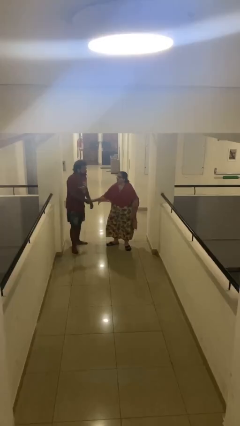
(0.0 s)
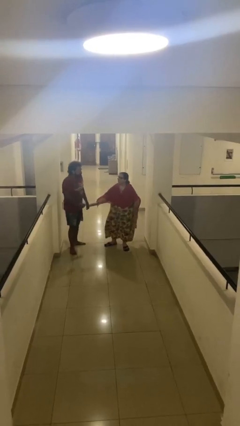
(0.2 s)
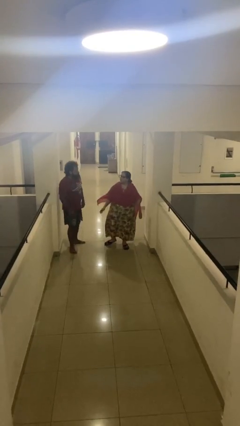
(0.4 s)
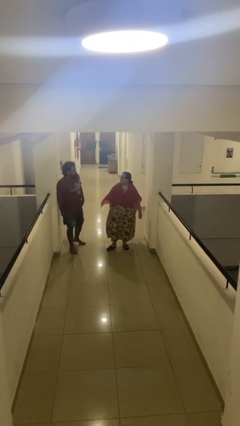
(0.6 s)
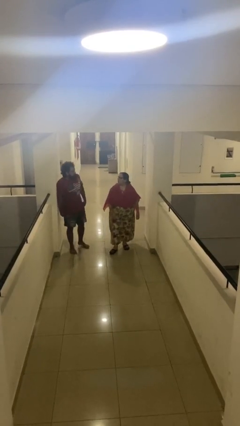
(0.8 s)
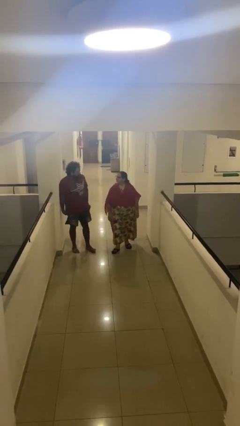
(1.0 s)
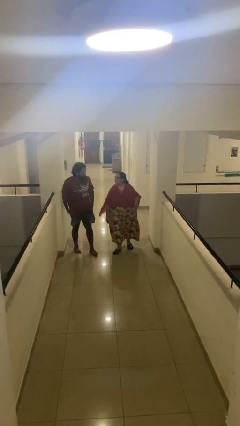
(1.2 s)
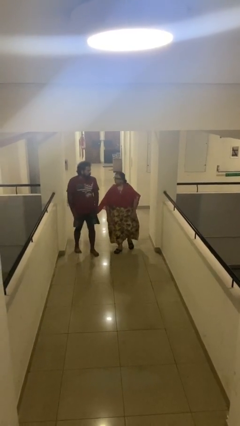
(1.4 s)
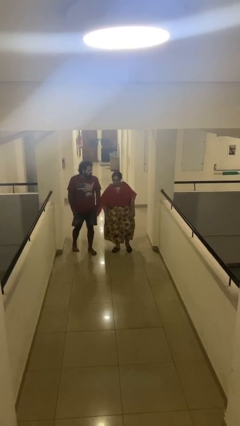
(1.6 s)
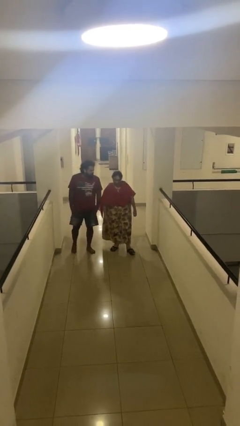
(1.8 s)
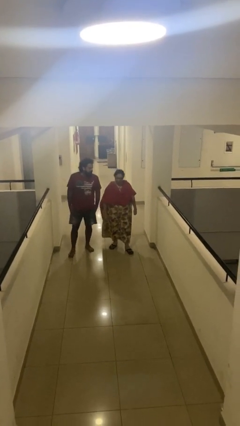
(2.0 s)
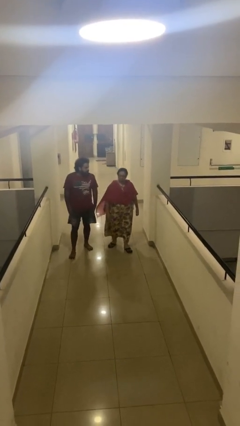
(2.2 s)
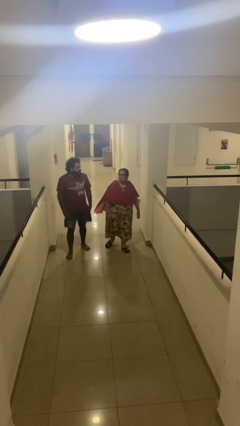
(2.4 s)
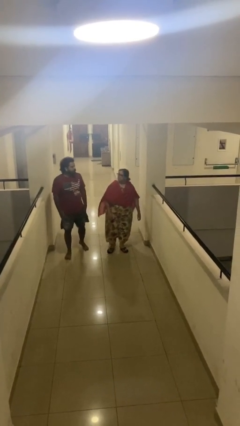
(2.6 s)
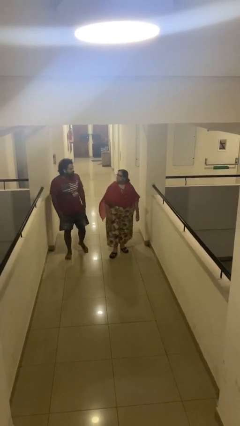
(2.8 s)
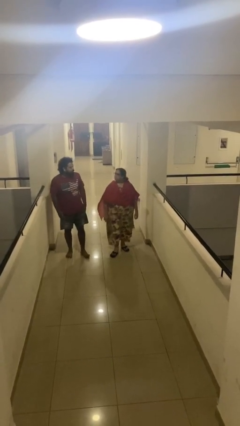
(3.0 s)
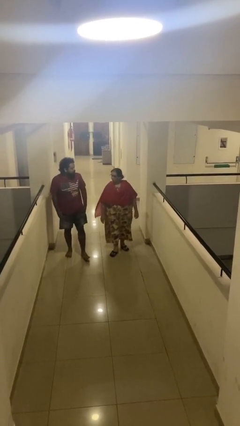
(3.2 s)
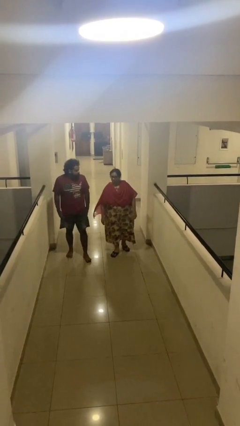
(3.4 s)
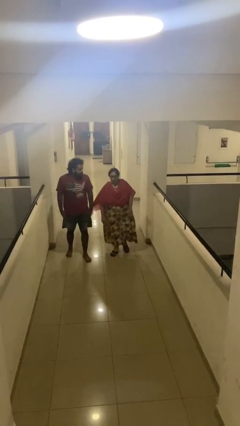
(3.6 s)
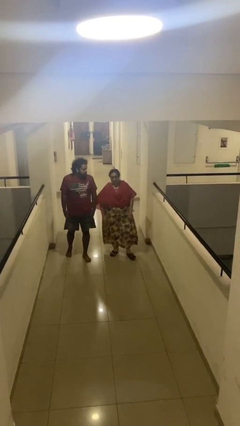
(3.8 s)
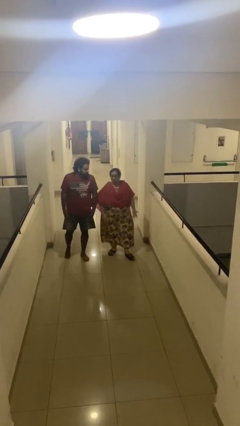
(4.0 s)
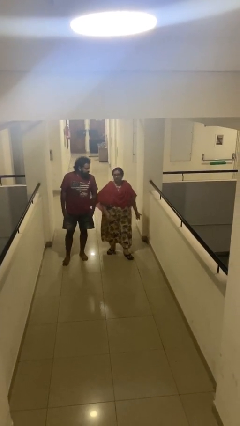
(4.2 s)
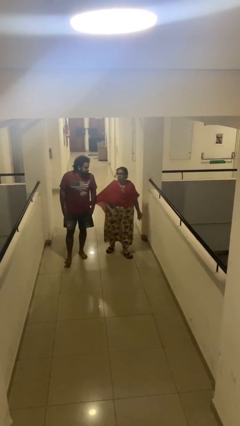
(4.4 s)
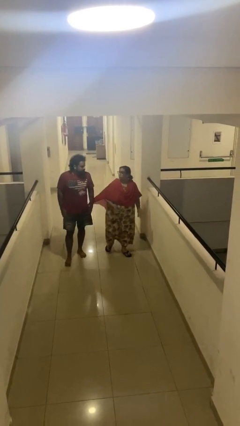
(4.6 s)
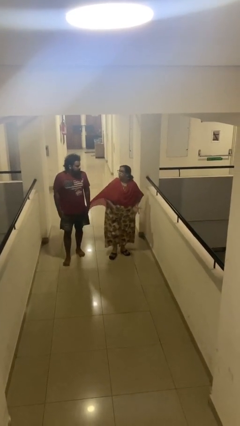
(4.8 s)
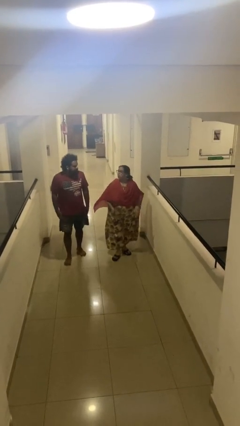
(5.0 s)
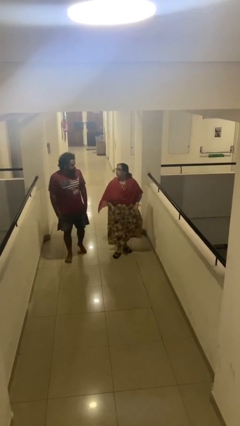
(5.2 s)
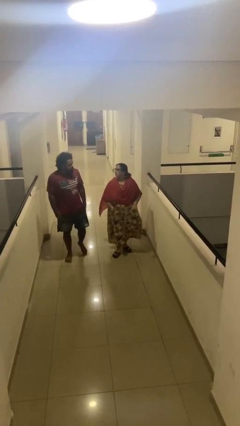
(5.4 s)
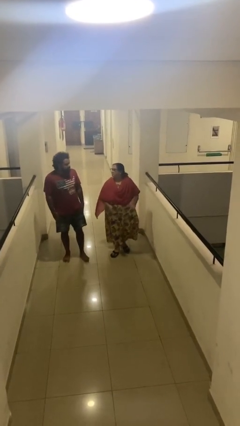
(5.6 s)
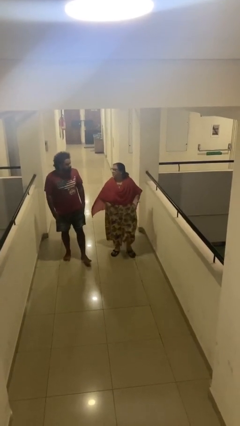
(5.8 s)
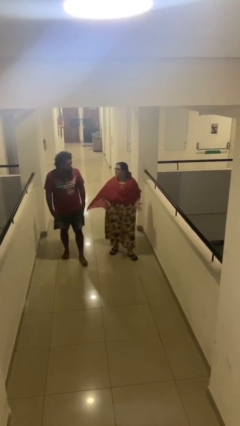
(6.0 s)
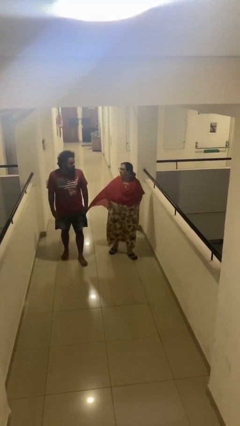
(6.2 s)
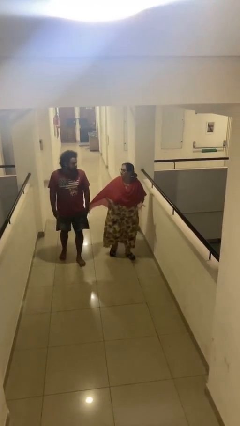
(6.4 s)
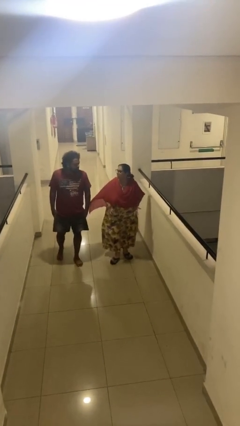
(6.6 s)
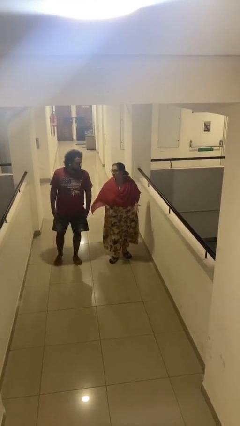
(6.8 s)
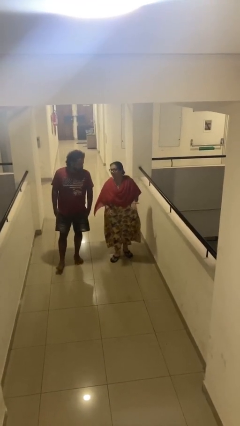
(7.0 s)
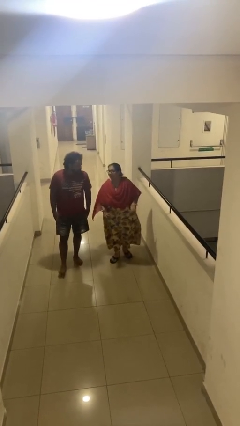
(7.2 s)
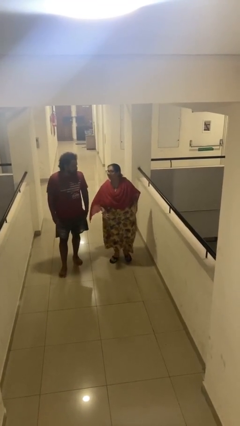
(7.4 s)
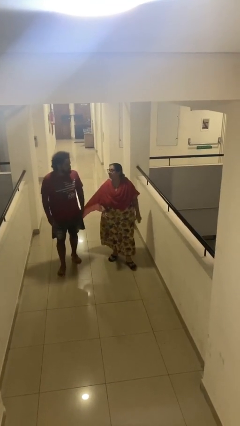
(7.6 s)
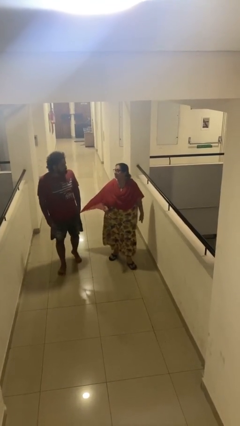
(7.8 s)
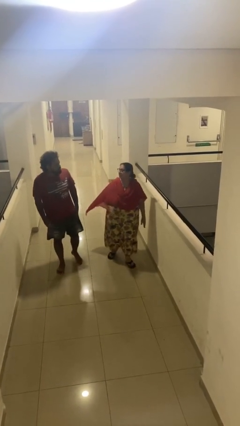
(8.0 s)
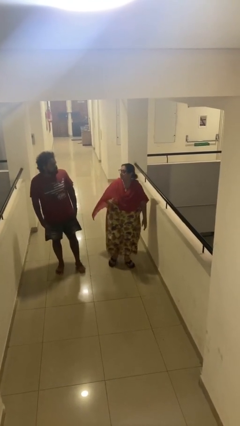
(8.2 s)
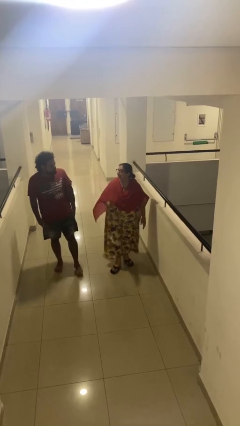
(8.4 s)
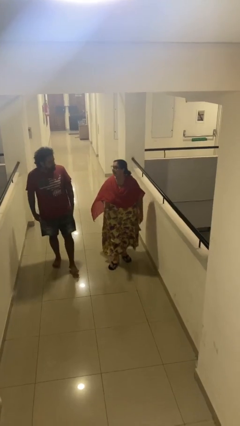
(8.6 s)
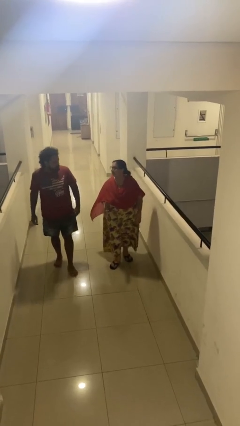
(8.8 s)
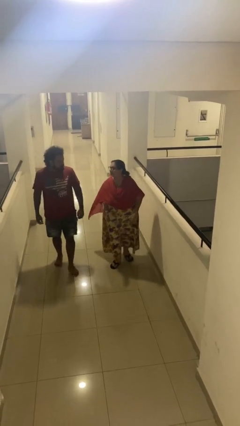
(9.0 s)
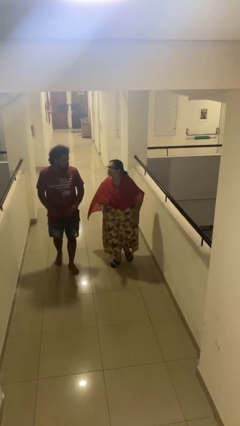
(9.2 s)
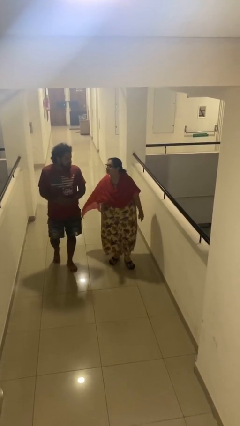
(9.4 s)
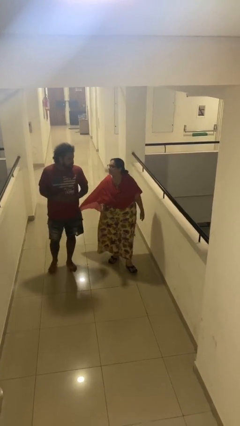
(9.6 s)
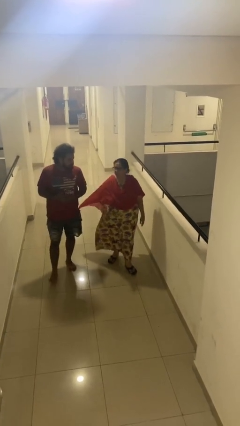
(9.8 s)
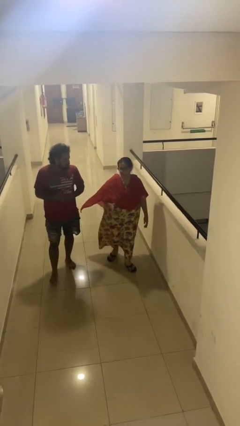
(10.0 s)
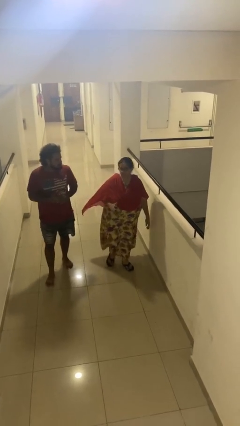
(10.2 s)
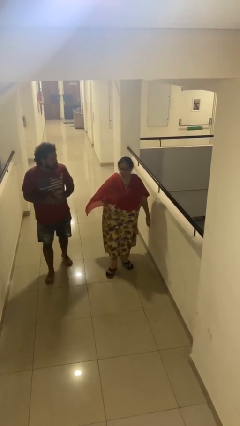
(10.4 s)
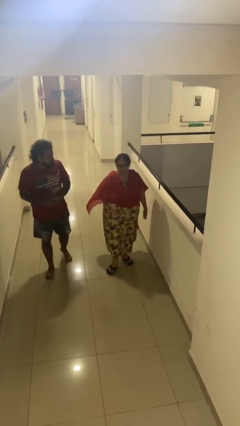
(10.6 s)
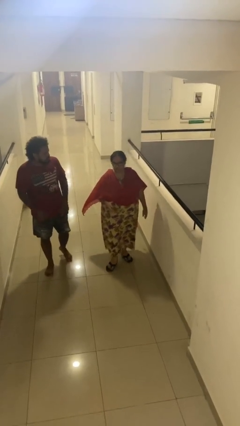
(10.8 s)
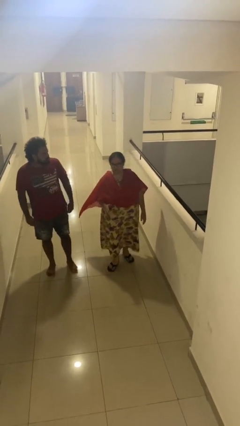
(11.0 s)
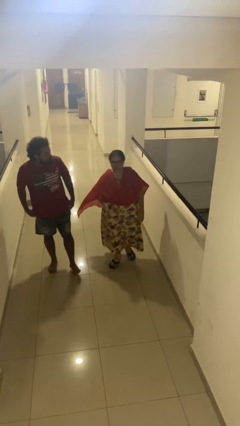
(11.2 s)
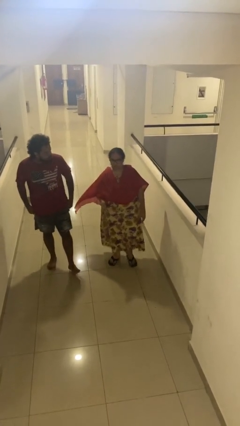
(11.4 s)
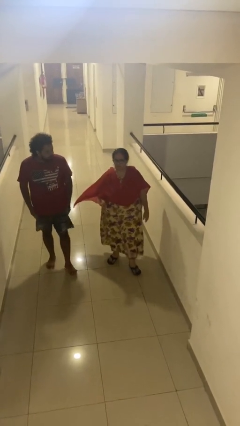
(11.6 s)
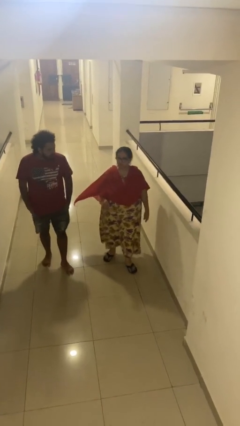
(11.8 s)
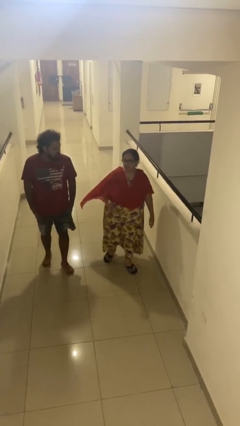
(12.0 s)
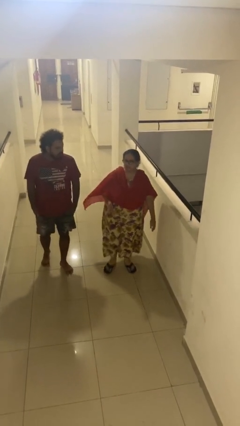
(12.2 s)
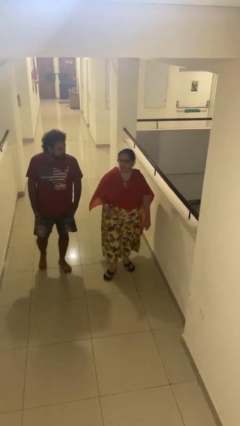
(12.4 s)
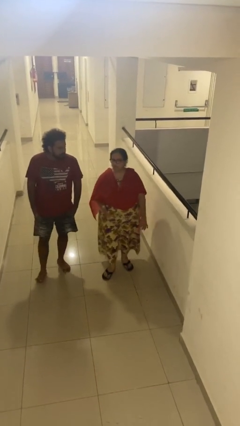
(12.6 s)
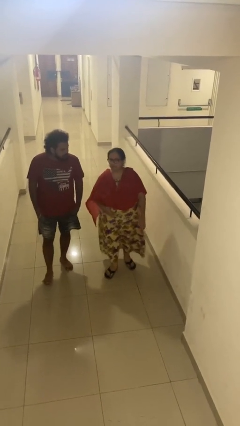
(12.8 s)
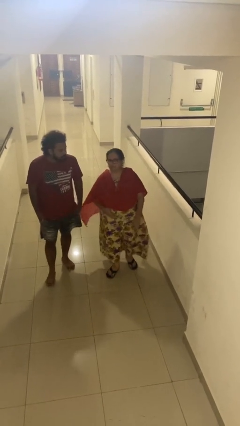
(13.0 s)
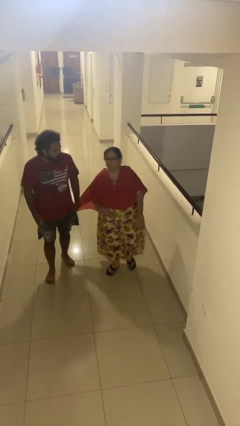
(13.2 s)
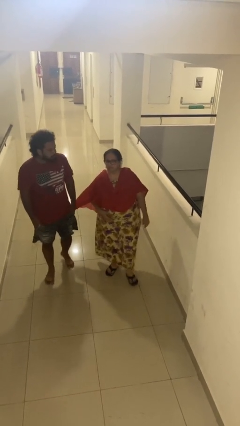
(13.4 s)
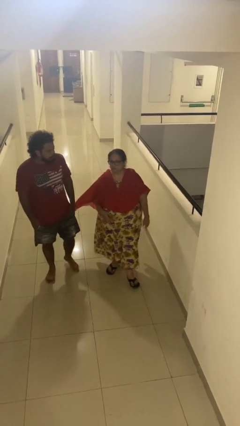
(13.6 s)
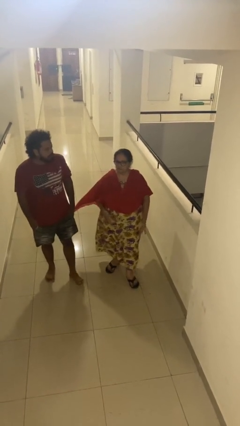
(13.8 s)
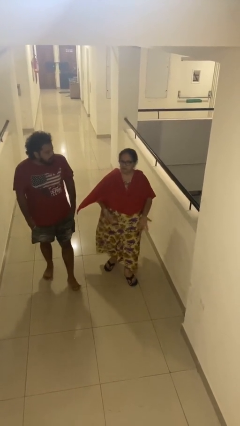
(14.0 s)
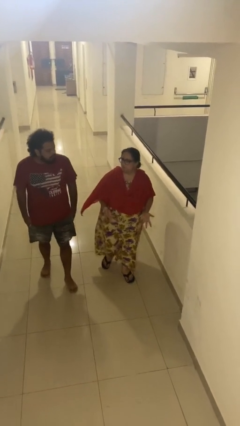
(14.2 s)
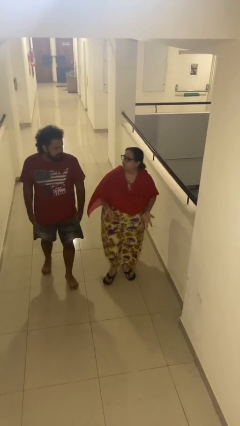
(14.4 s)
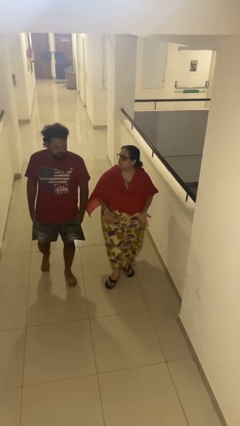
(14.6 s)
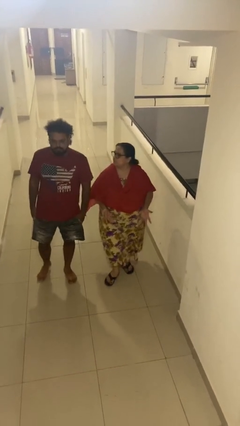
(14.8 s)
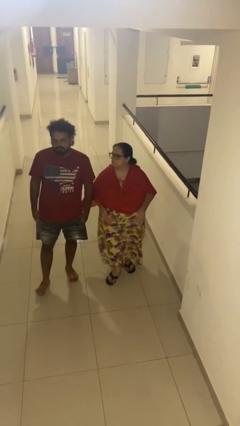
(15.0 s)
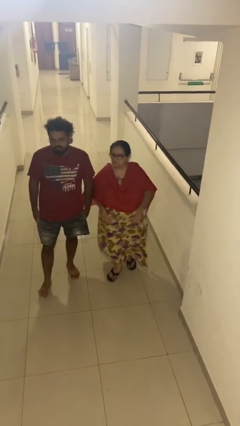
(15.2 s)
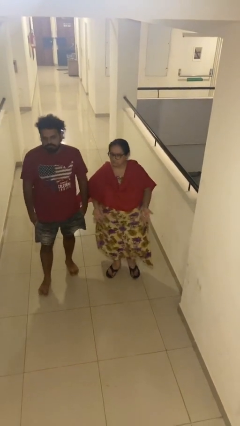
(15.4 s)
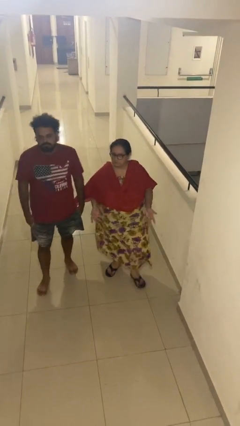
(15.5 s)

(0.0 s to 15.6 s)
person talks to person

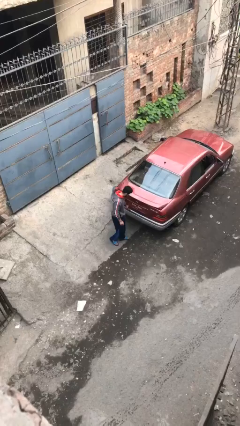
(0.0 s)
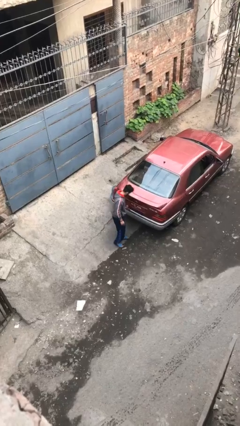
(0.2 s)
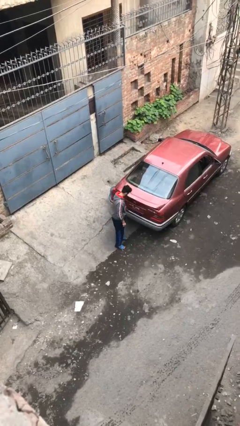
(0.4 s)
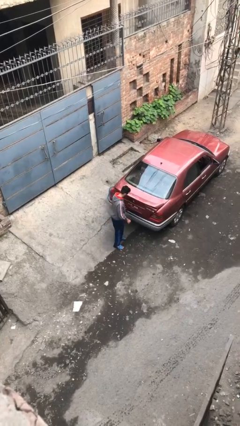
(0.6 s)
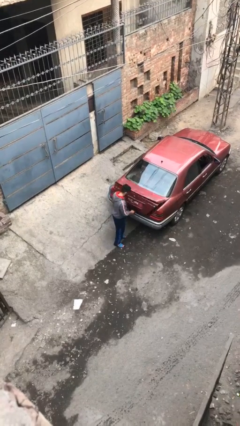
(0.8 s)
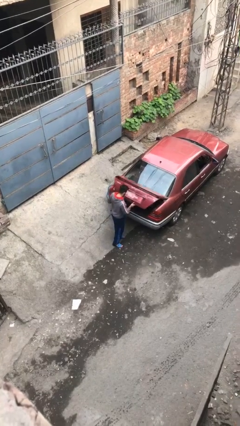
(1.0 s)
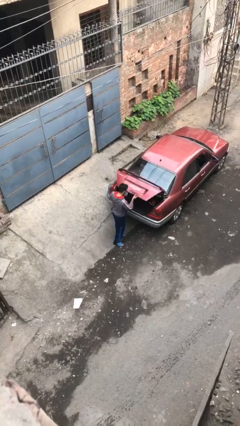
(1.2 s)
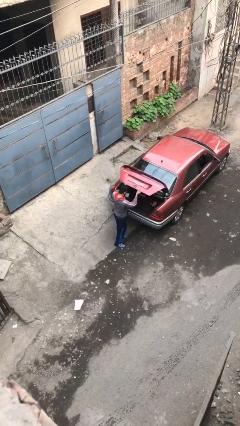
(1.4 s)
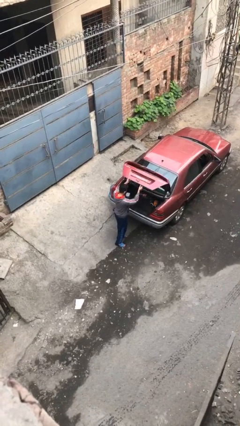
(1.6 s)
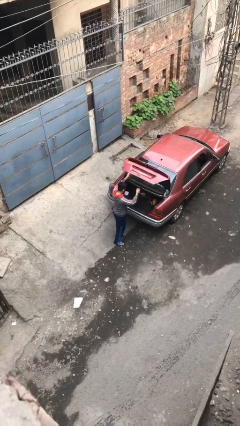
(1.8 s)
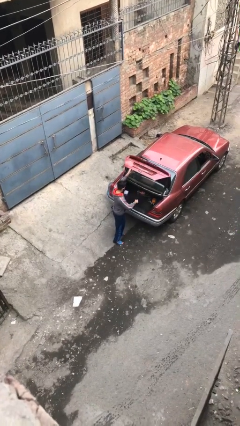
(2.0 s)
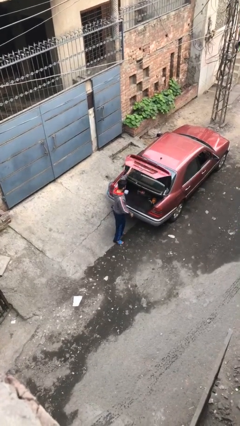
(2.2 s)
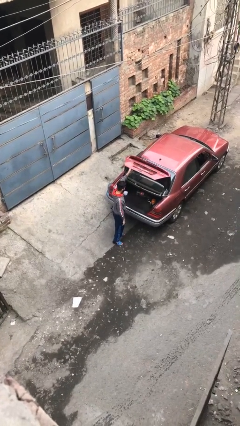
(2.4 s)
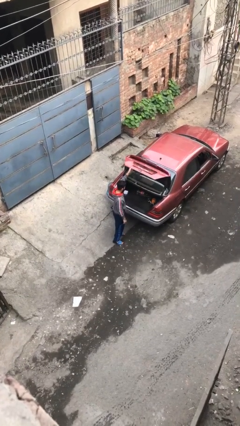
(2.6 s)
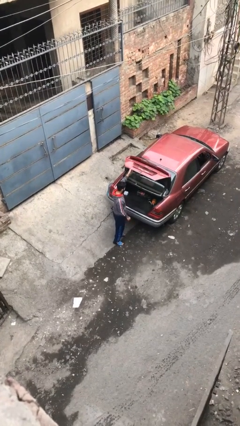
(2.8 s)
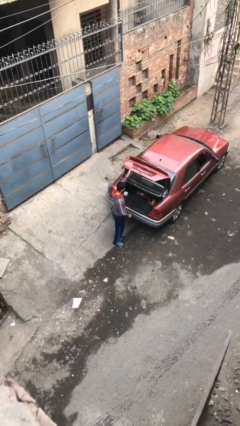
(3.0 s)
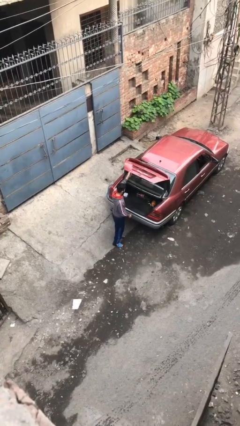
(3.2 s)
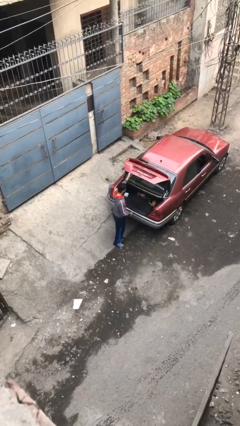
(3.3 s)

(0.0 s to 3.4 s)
person opens car trunk
